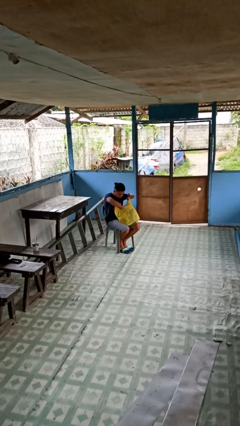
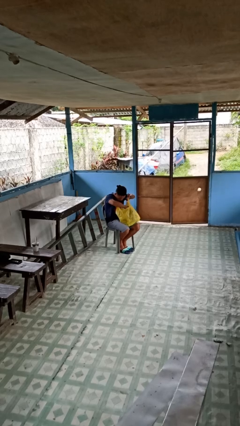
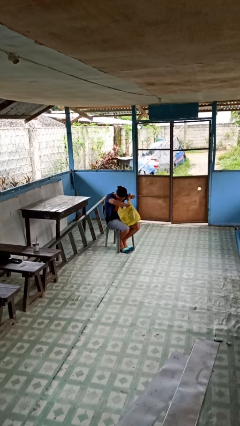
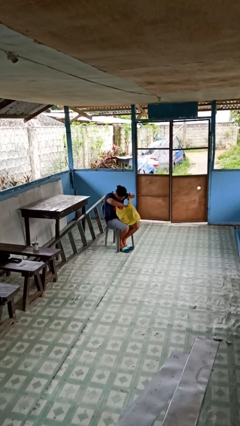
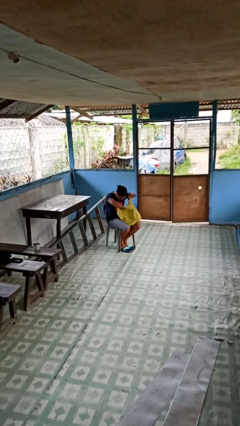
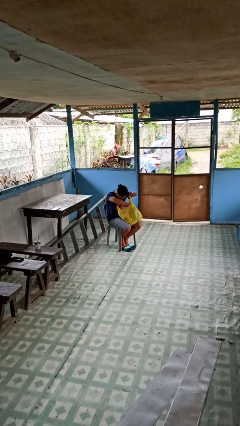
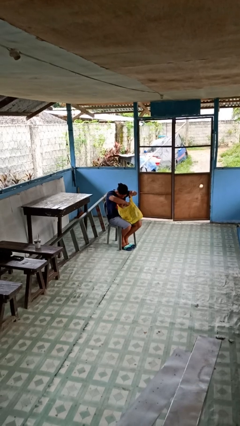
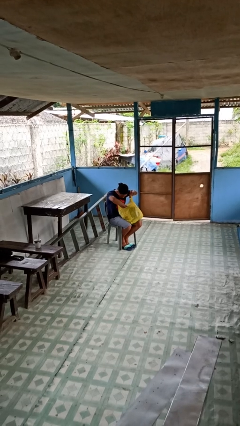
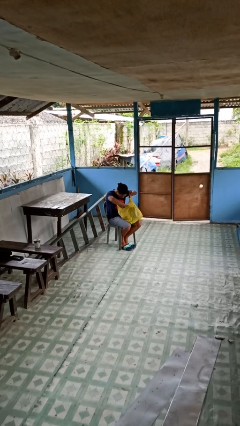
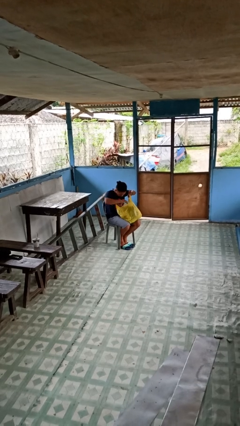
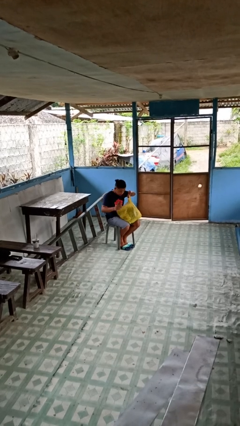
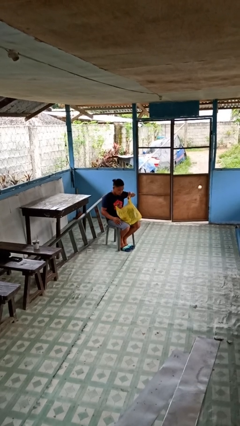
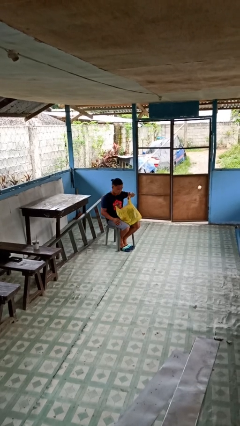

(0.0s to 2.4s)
person searches in bag

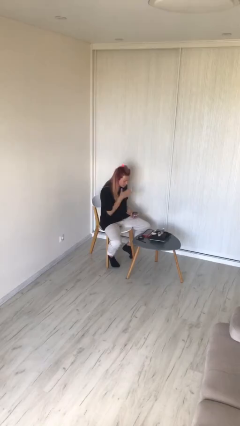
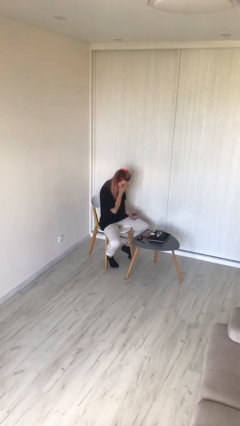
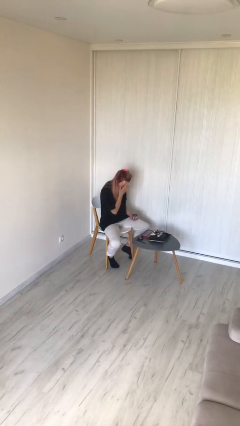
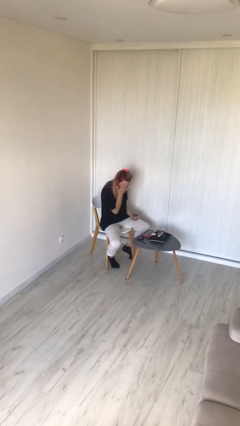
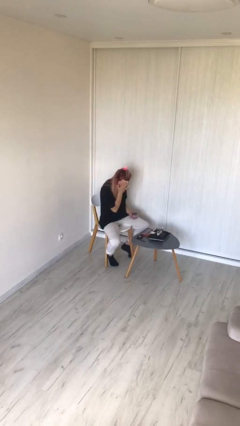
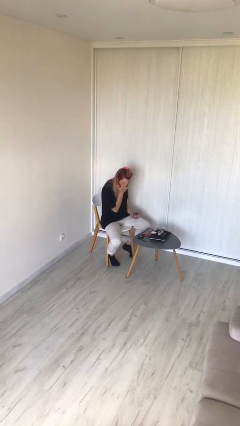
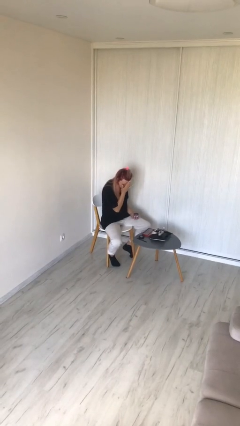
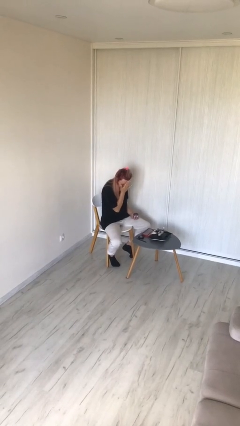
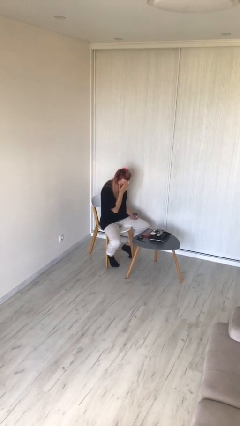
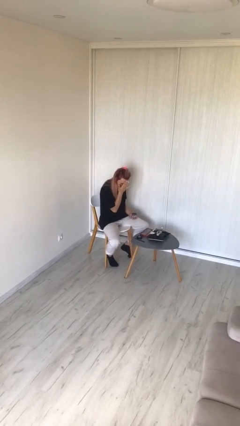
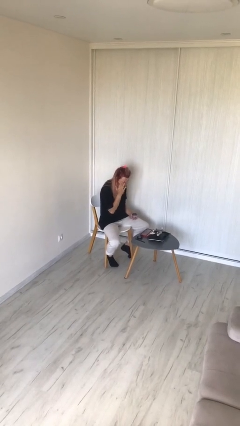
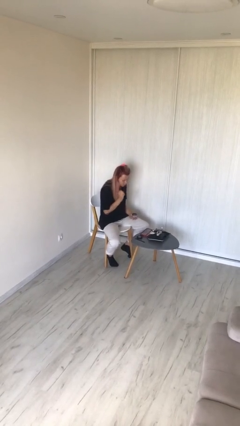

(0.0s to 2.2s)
person applies foundation makeup

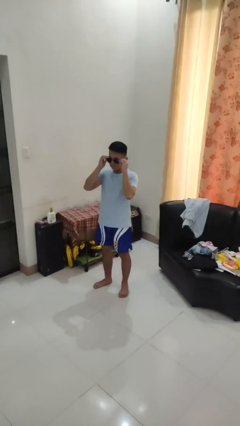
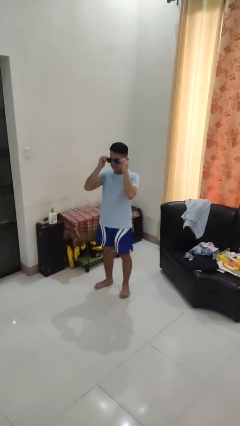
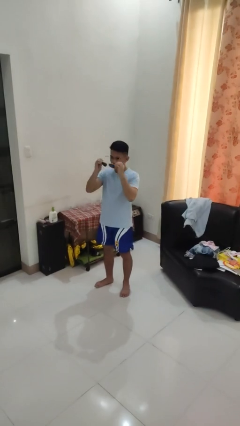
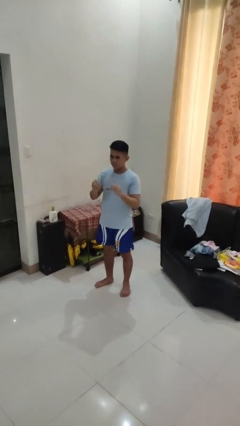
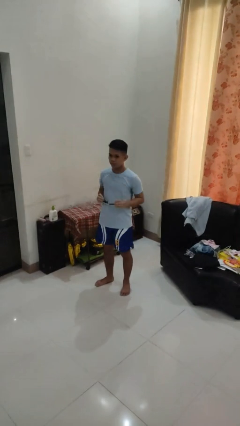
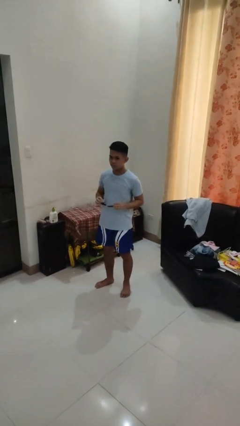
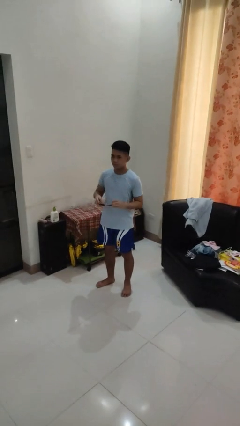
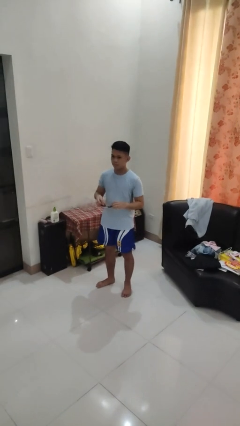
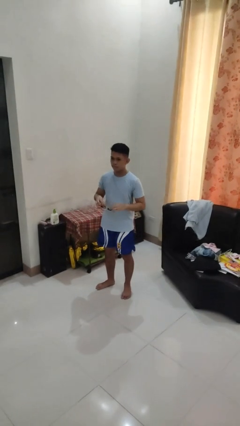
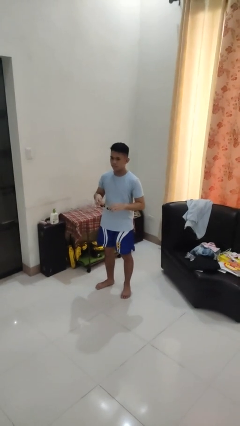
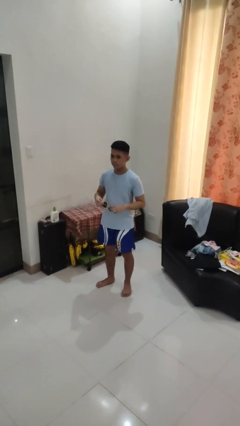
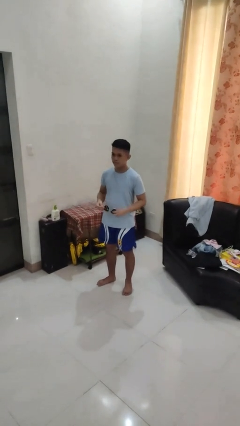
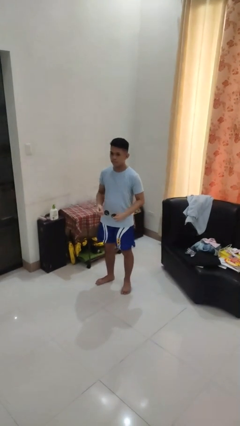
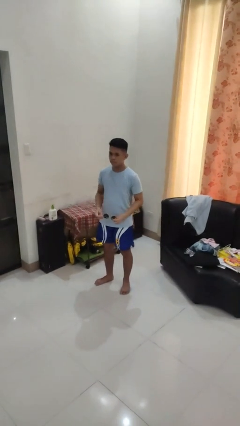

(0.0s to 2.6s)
person takes off sunglasses

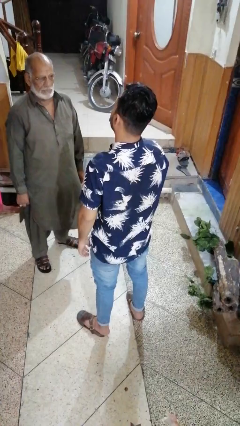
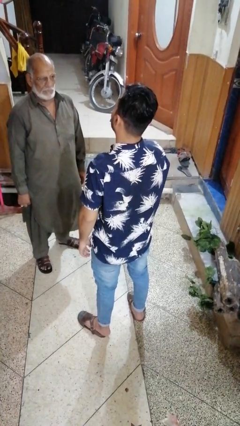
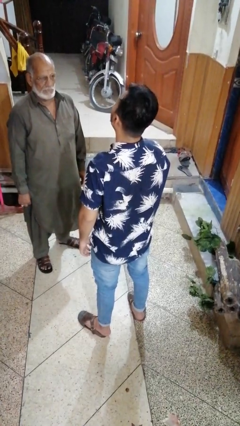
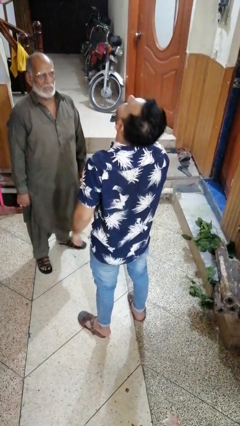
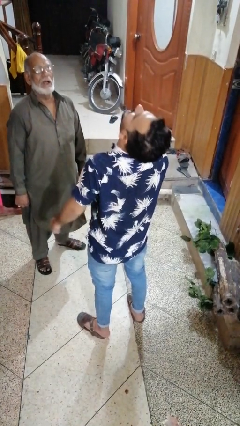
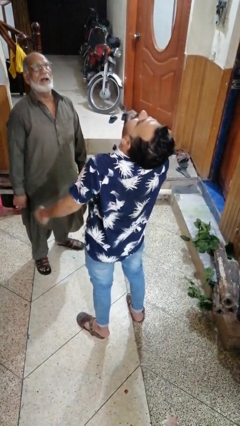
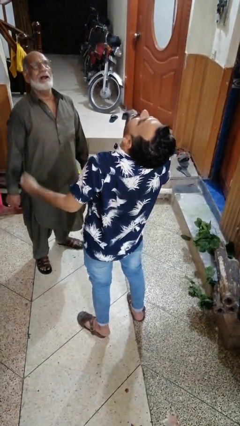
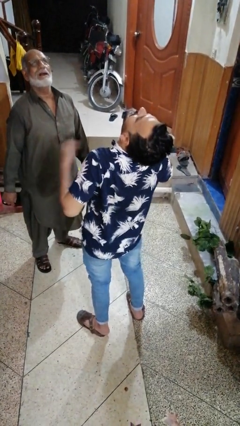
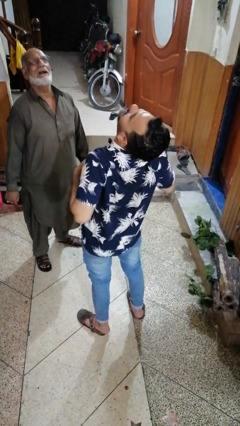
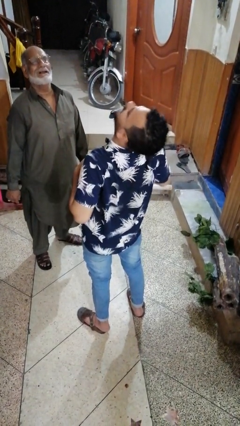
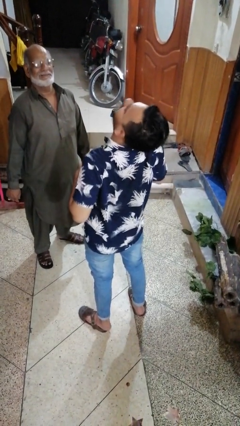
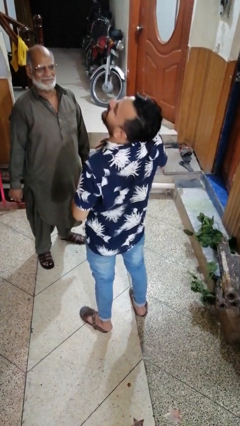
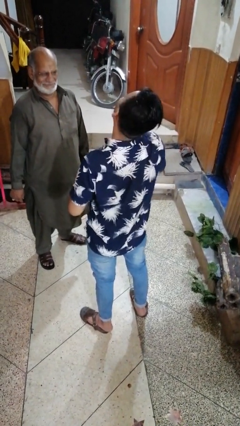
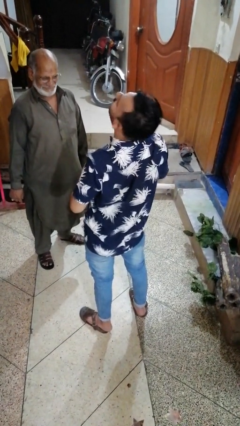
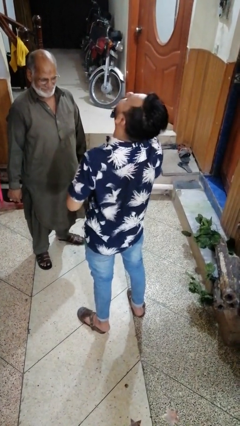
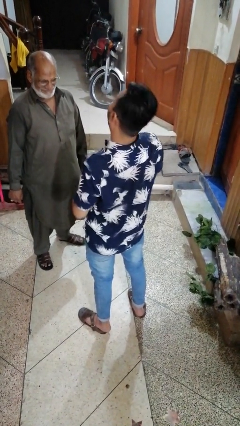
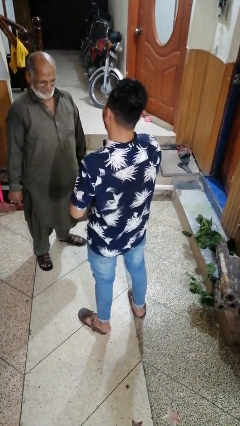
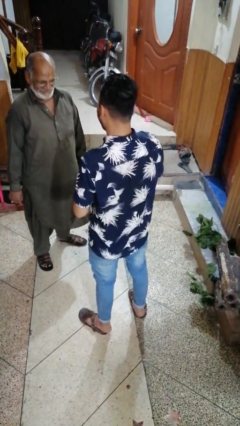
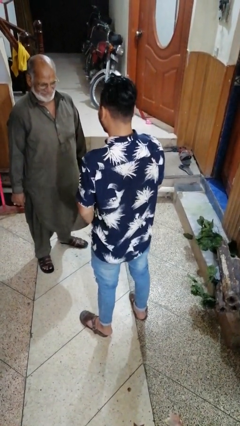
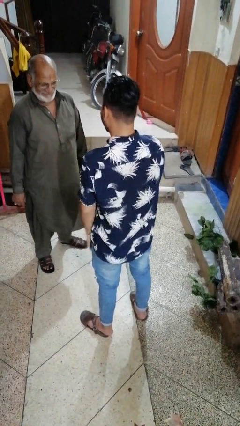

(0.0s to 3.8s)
person laughs with person

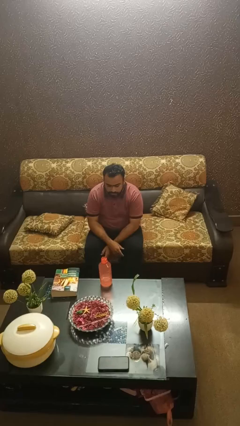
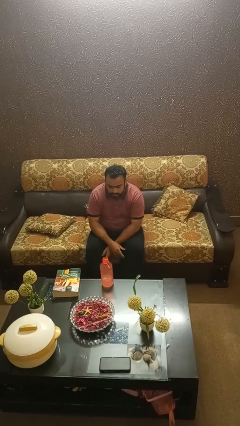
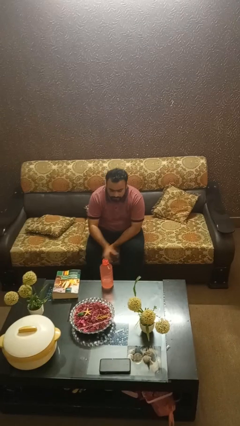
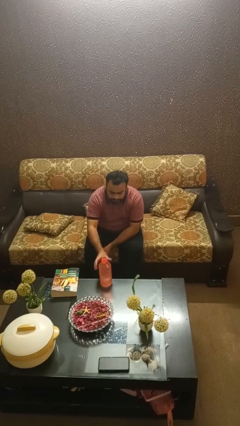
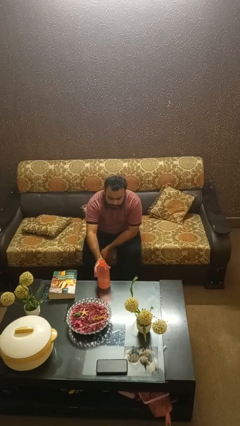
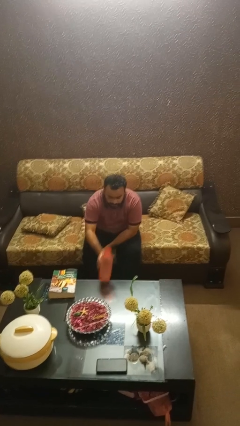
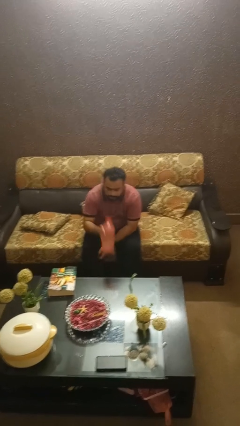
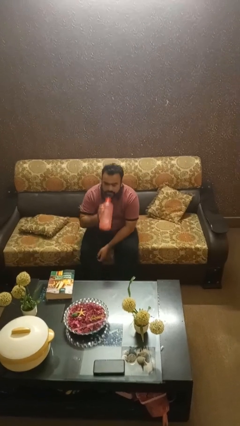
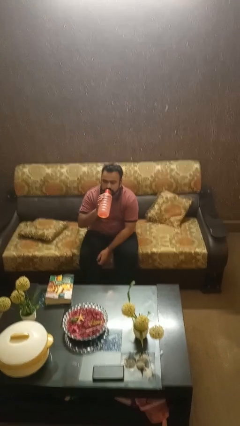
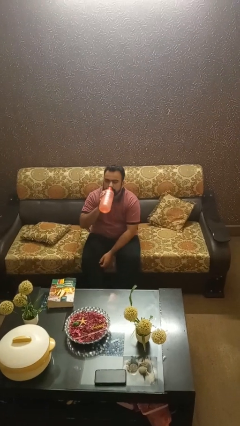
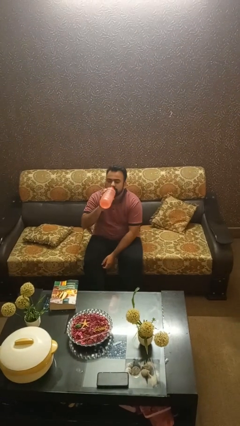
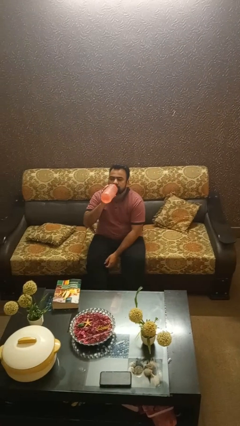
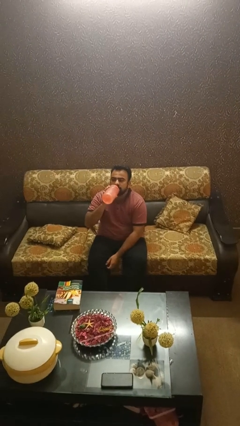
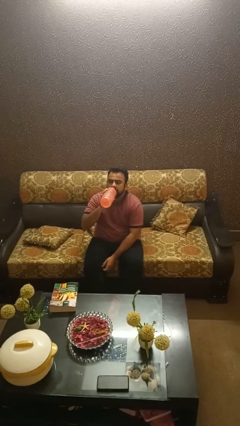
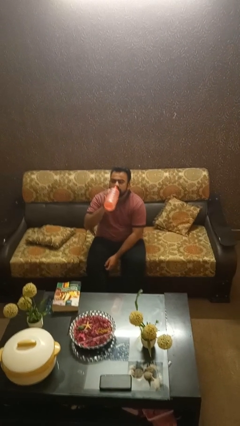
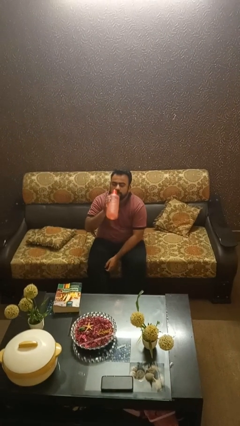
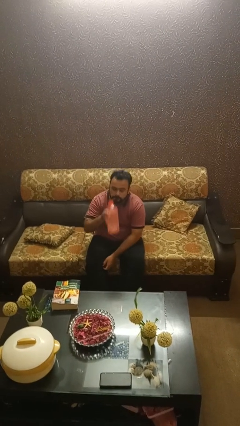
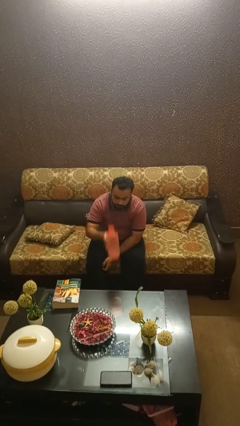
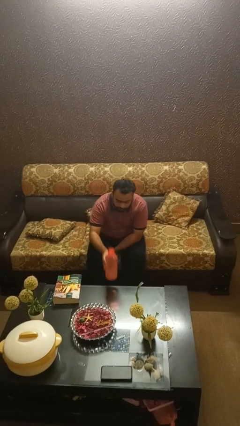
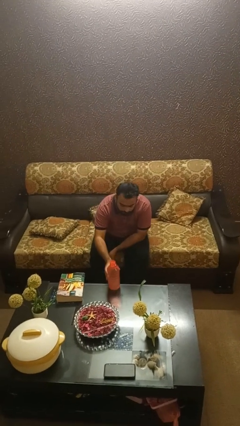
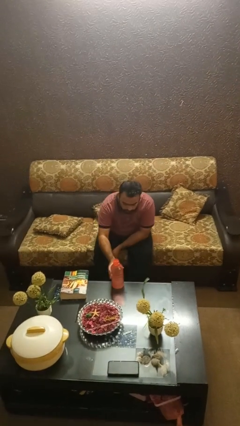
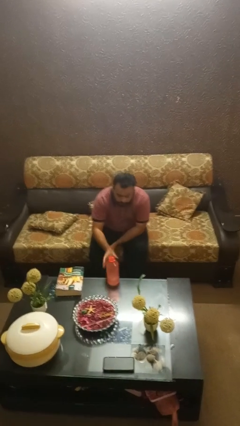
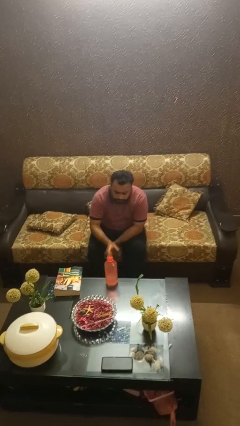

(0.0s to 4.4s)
person drinks from bottle

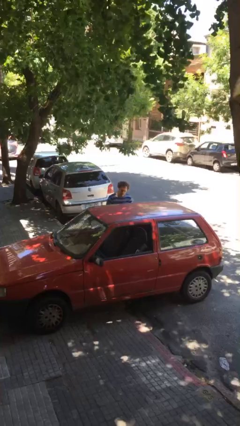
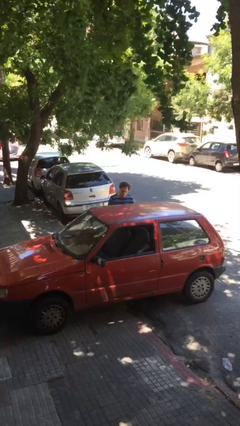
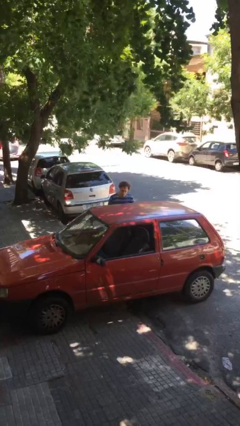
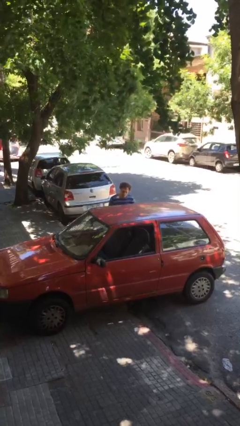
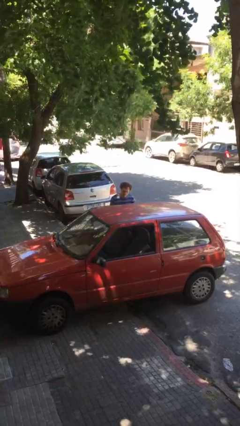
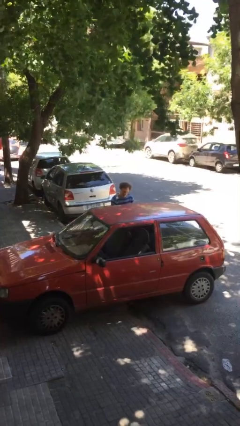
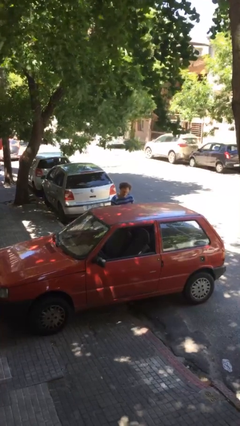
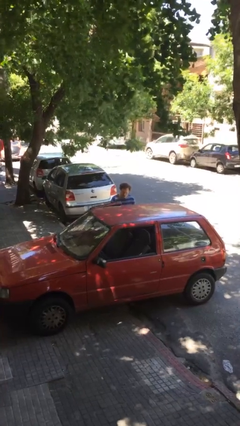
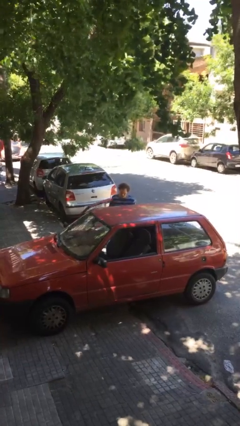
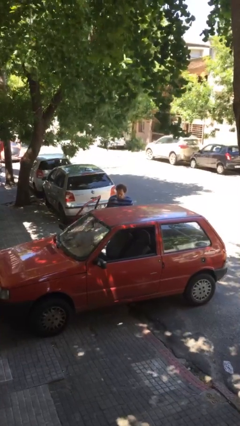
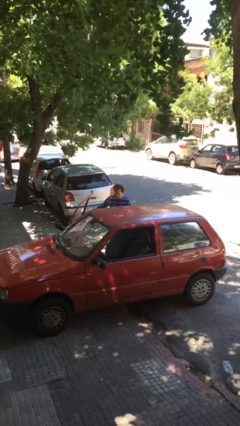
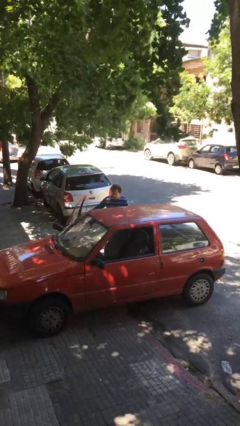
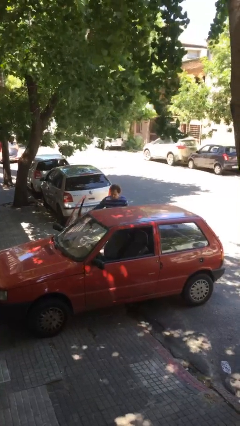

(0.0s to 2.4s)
person opens car door
